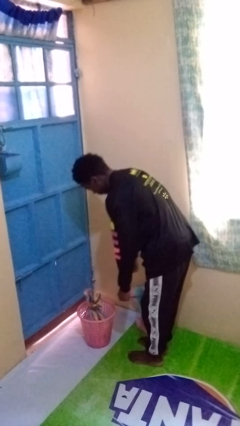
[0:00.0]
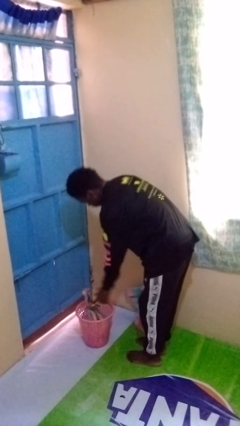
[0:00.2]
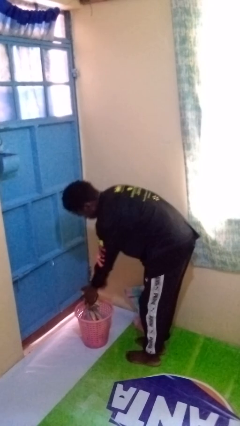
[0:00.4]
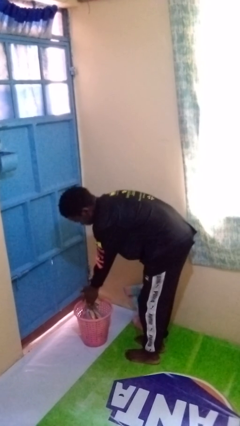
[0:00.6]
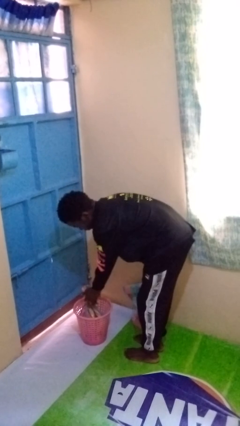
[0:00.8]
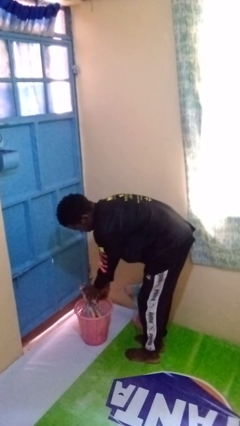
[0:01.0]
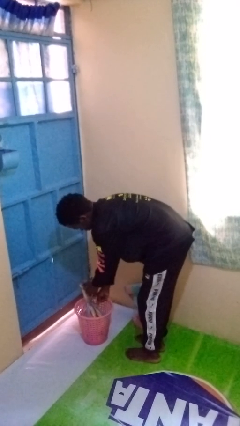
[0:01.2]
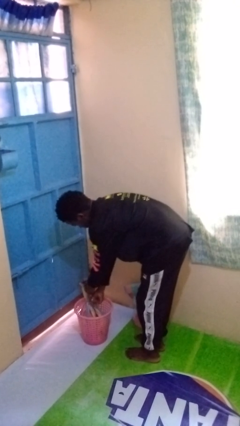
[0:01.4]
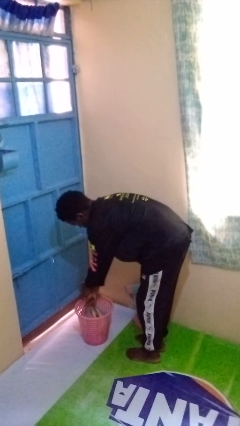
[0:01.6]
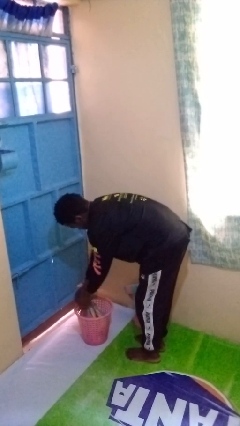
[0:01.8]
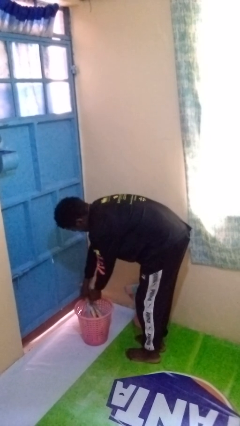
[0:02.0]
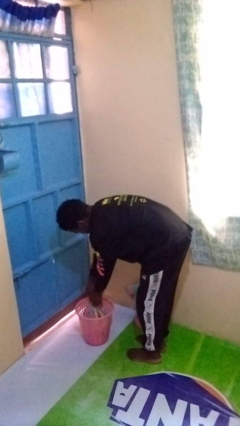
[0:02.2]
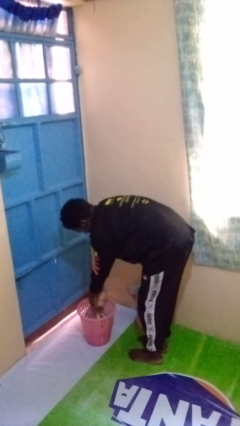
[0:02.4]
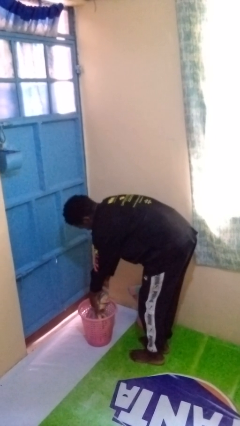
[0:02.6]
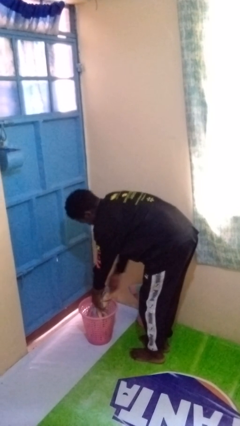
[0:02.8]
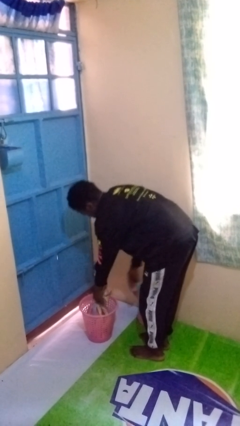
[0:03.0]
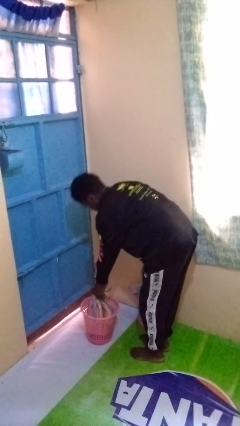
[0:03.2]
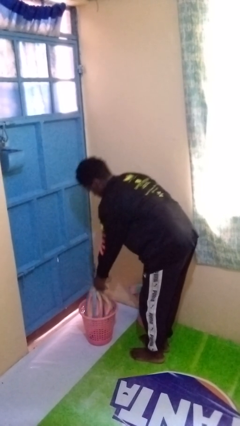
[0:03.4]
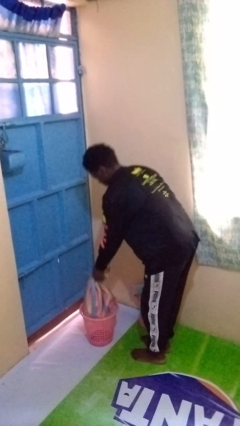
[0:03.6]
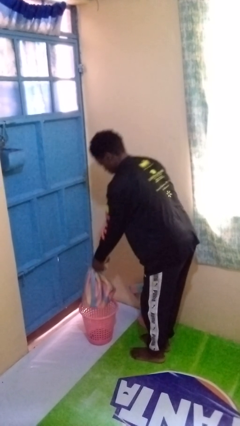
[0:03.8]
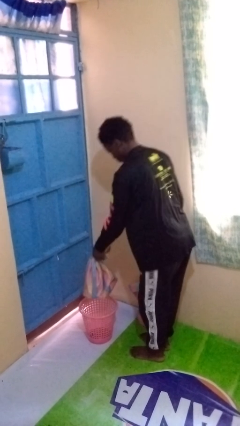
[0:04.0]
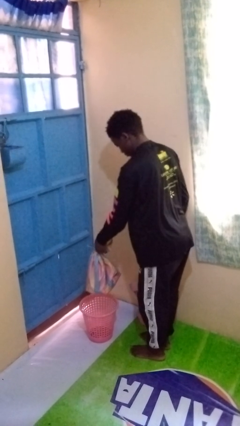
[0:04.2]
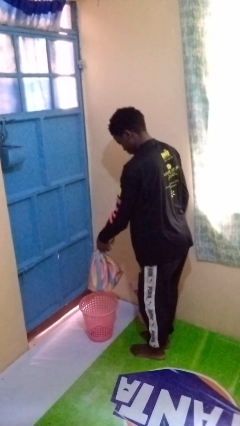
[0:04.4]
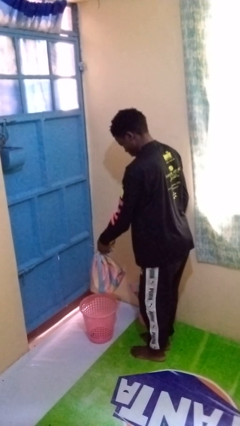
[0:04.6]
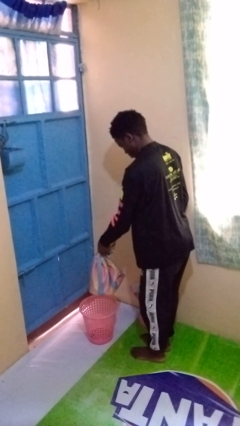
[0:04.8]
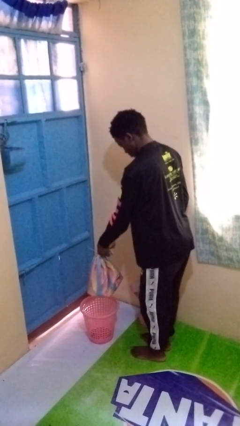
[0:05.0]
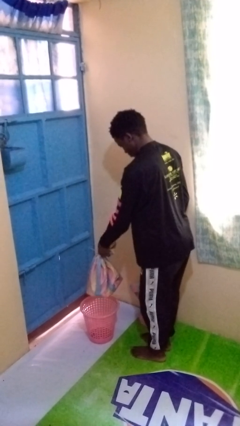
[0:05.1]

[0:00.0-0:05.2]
person removes trashbag from trashcan

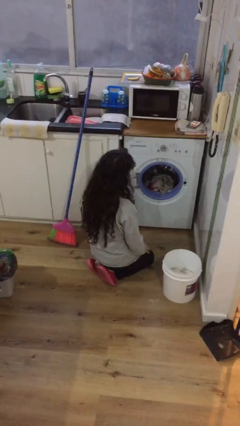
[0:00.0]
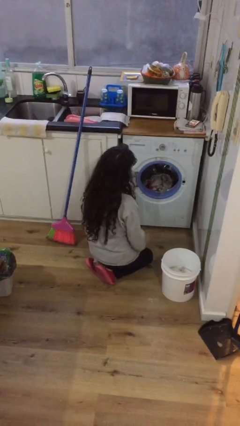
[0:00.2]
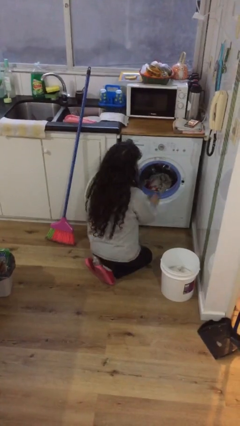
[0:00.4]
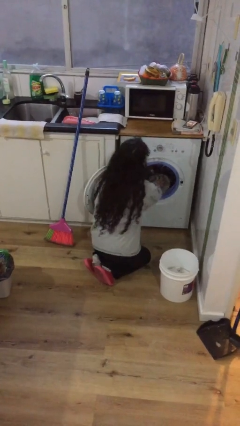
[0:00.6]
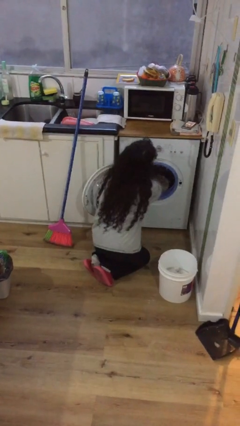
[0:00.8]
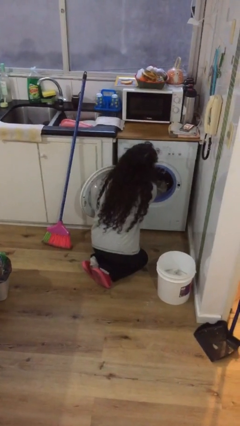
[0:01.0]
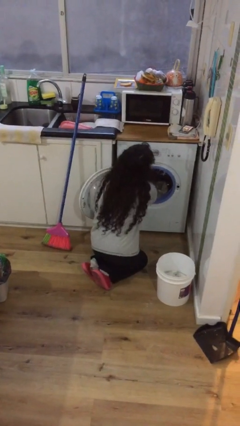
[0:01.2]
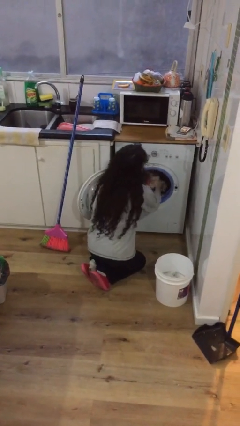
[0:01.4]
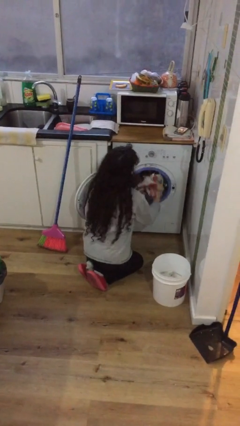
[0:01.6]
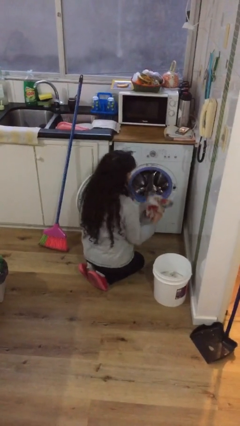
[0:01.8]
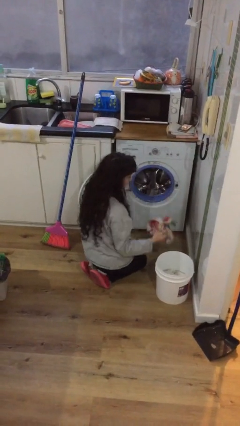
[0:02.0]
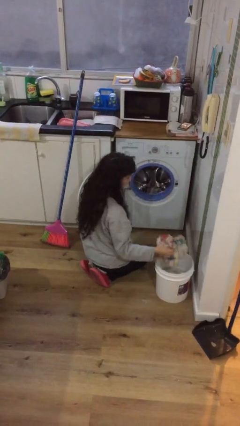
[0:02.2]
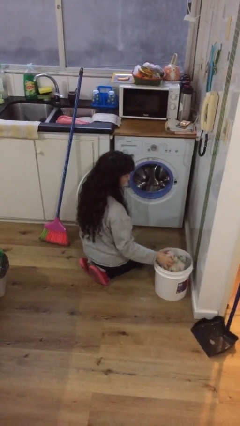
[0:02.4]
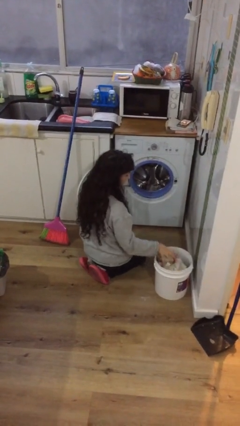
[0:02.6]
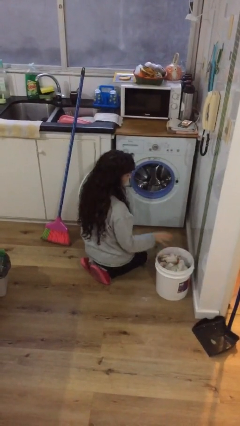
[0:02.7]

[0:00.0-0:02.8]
person unloads dryer

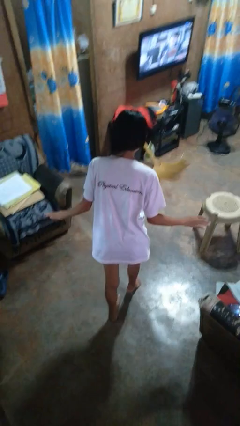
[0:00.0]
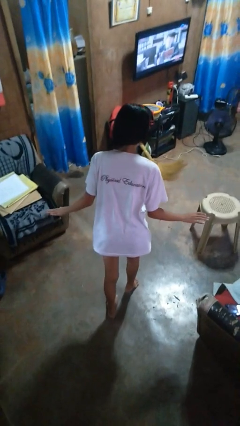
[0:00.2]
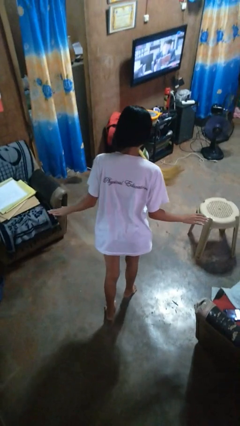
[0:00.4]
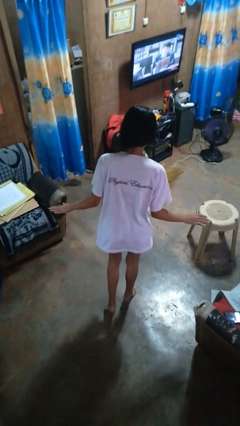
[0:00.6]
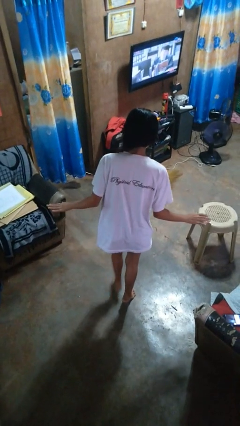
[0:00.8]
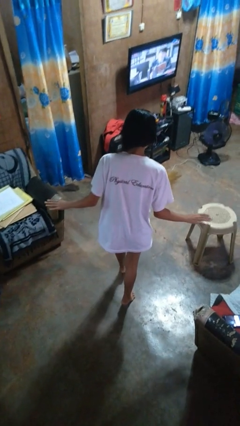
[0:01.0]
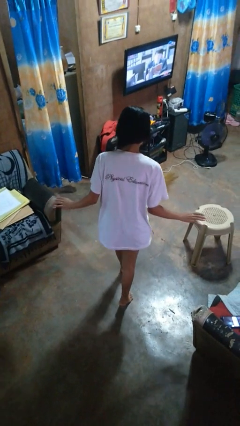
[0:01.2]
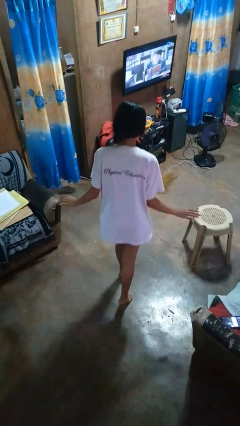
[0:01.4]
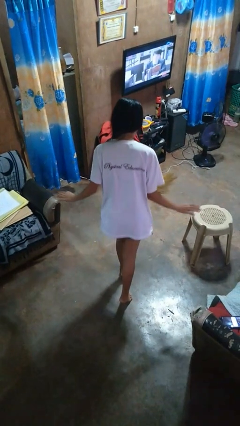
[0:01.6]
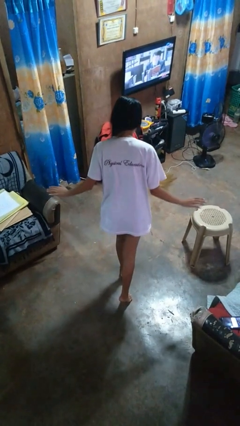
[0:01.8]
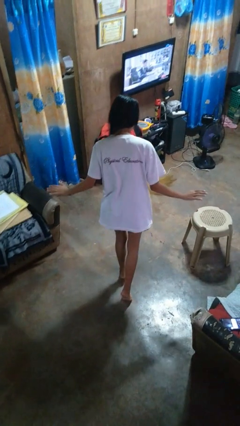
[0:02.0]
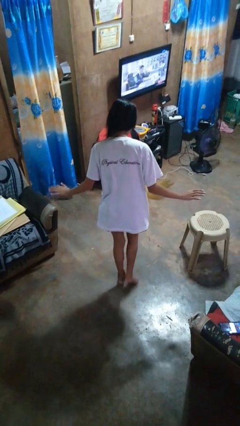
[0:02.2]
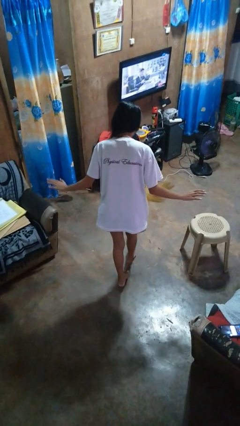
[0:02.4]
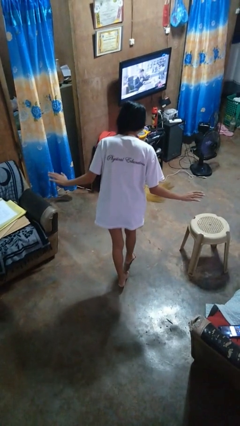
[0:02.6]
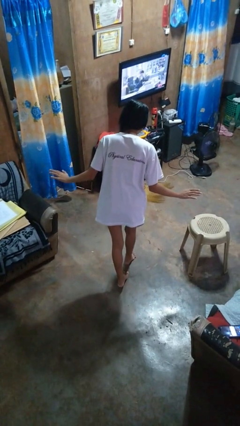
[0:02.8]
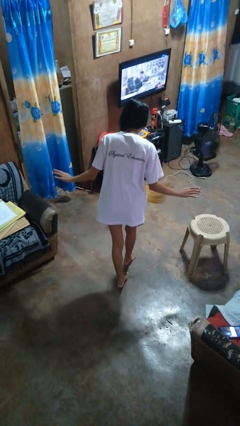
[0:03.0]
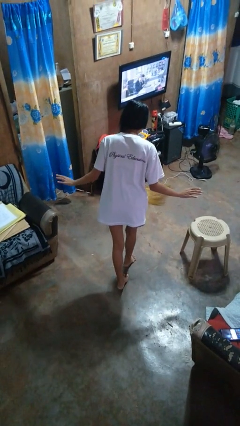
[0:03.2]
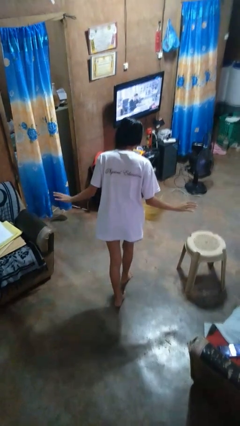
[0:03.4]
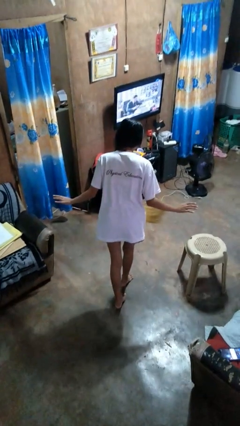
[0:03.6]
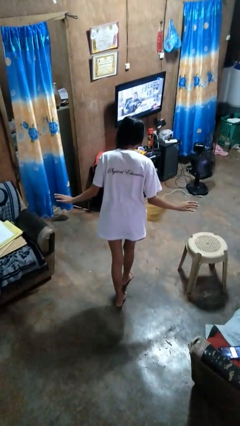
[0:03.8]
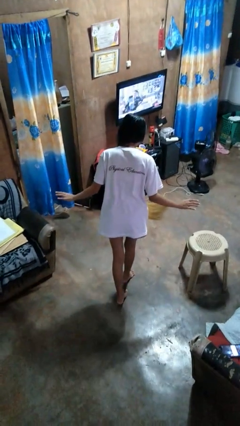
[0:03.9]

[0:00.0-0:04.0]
person walks tiptoe

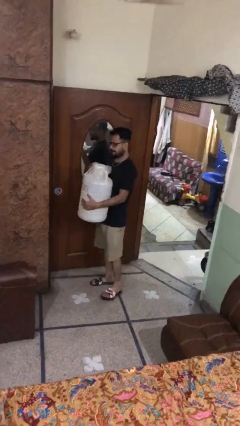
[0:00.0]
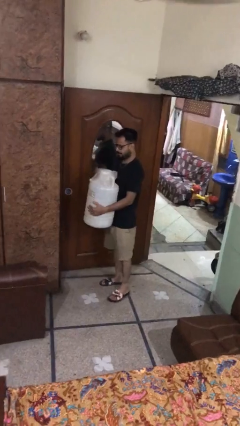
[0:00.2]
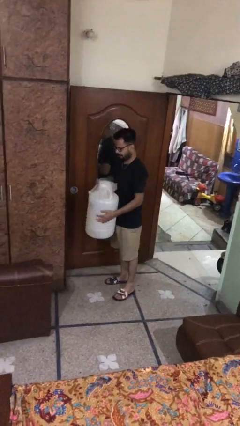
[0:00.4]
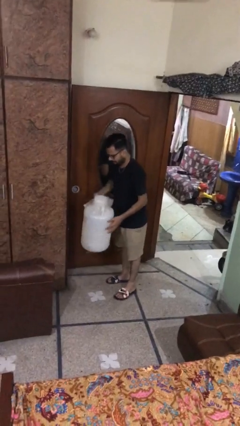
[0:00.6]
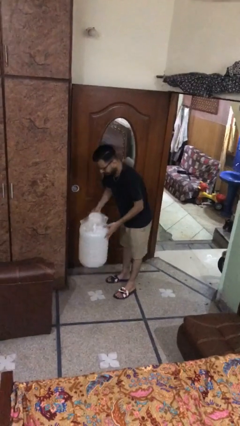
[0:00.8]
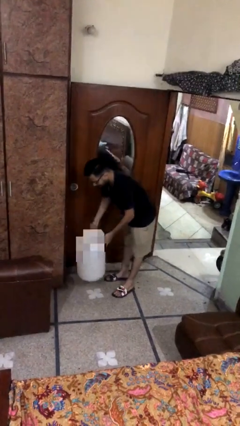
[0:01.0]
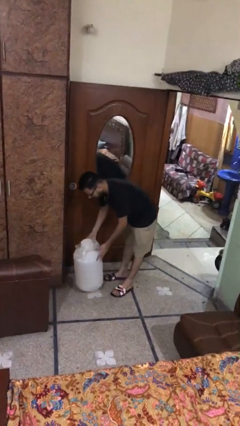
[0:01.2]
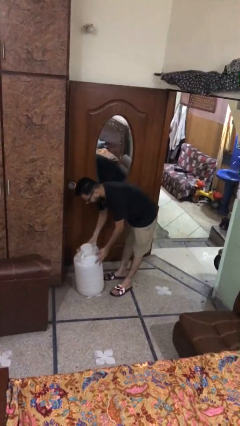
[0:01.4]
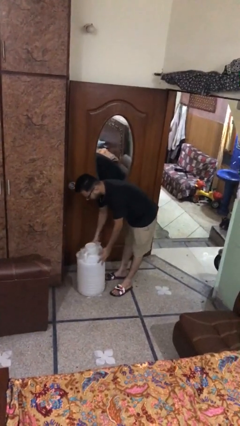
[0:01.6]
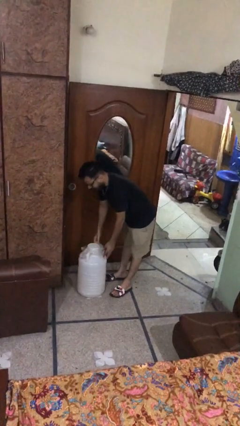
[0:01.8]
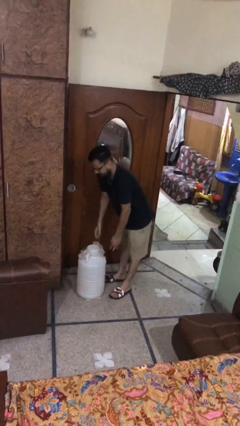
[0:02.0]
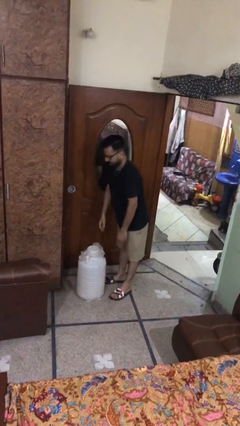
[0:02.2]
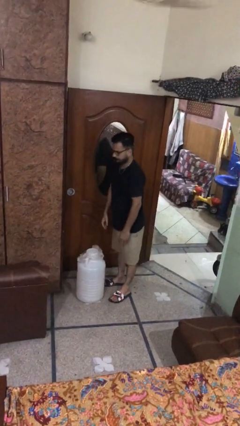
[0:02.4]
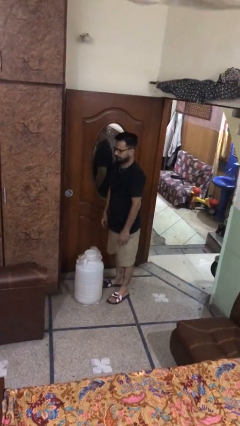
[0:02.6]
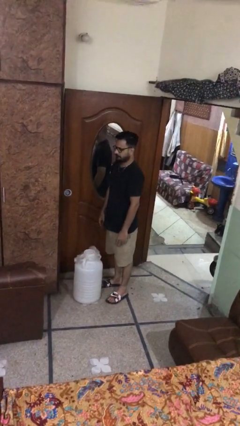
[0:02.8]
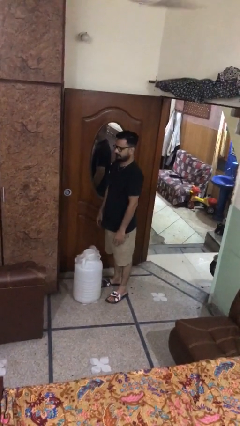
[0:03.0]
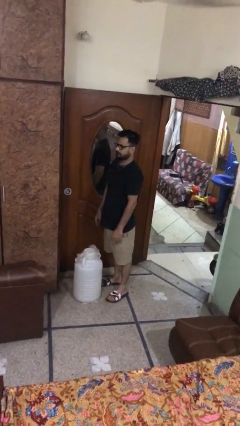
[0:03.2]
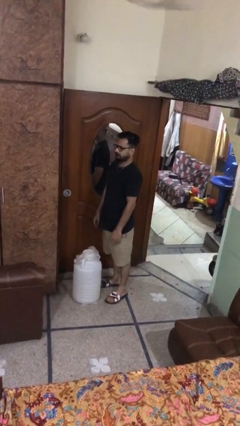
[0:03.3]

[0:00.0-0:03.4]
person puts down object on floor

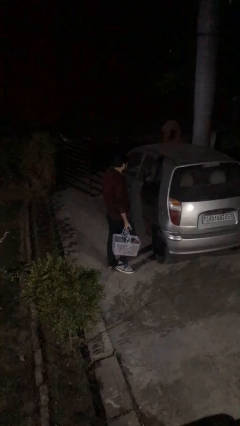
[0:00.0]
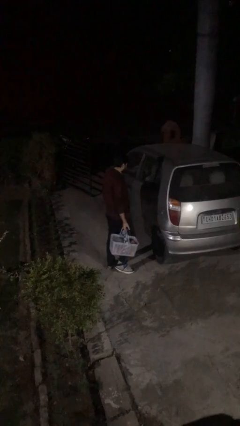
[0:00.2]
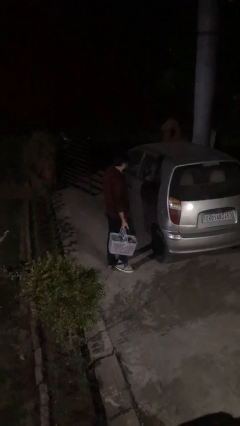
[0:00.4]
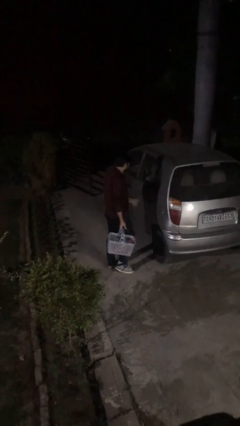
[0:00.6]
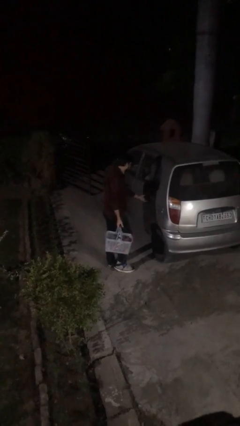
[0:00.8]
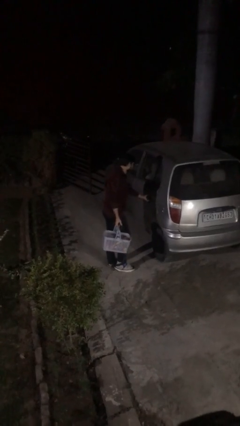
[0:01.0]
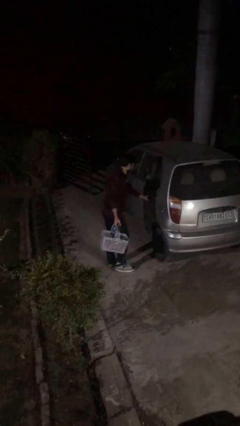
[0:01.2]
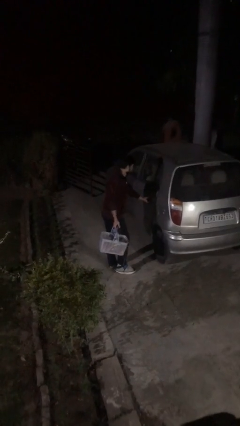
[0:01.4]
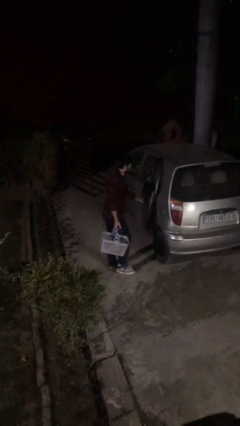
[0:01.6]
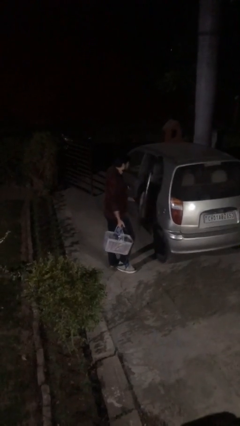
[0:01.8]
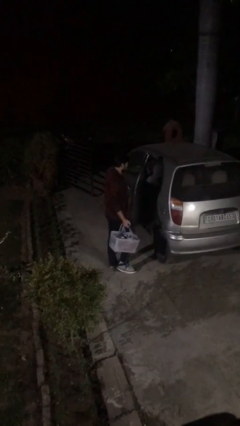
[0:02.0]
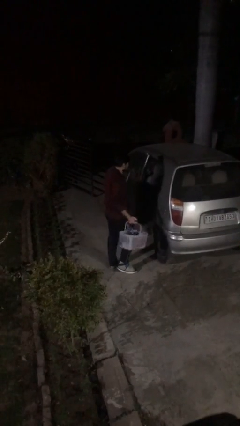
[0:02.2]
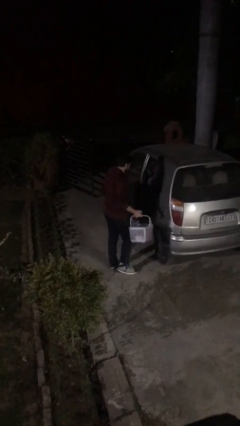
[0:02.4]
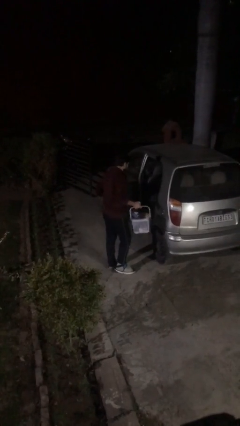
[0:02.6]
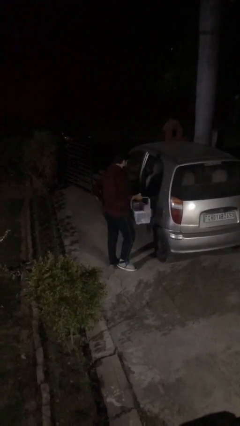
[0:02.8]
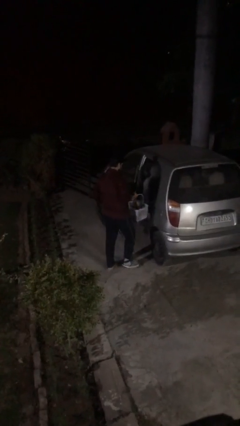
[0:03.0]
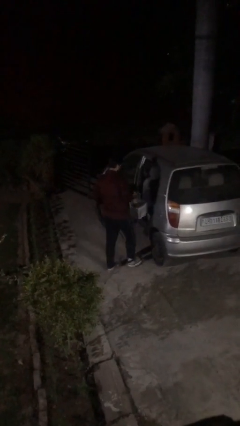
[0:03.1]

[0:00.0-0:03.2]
person opens car door
